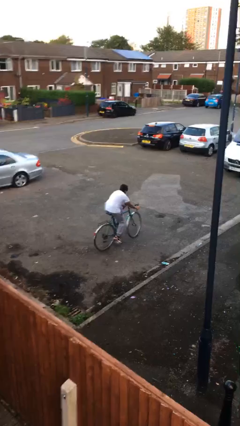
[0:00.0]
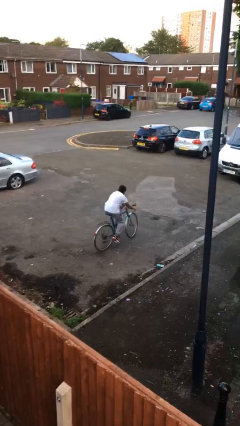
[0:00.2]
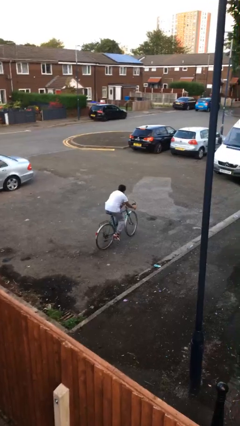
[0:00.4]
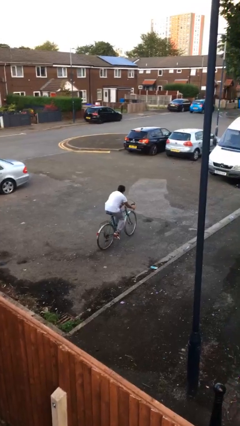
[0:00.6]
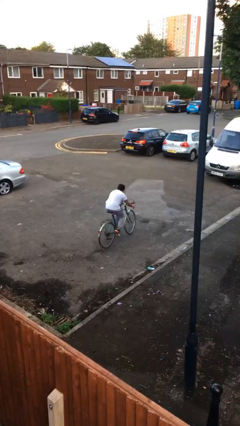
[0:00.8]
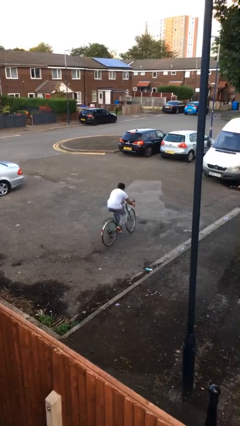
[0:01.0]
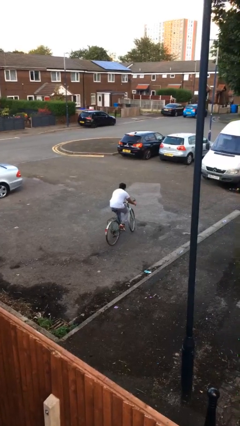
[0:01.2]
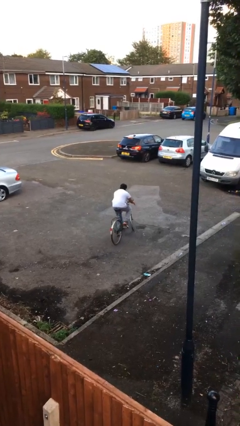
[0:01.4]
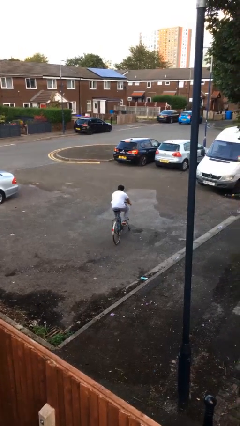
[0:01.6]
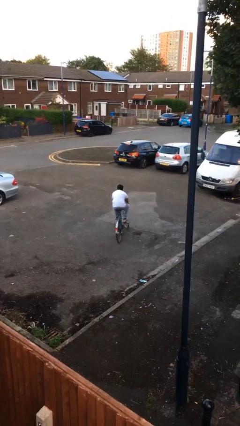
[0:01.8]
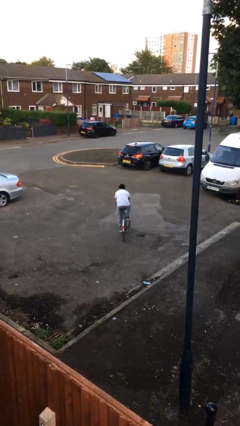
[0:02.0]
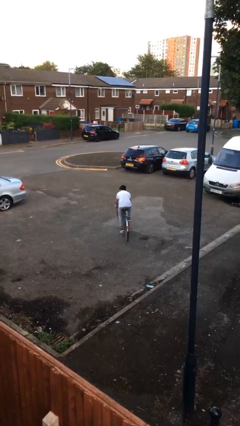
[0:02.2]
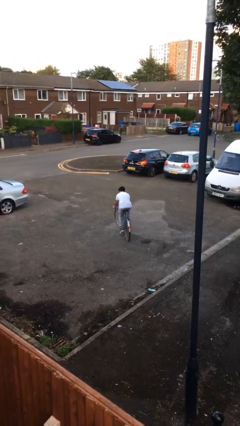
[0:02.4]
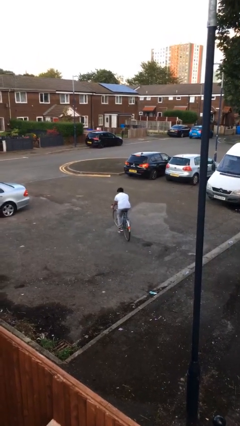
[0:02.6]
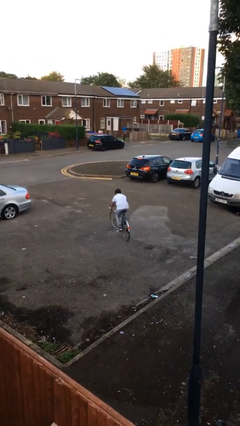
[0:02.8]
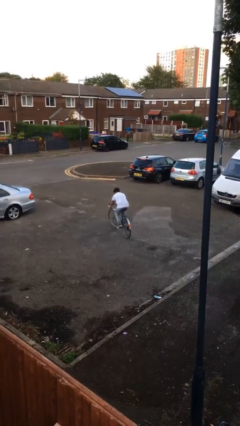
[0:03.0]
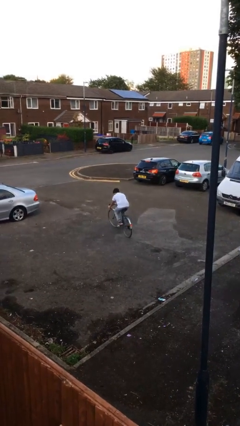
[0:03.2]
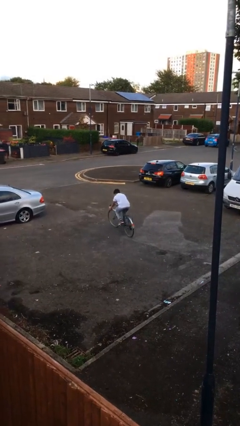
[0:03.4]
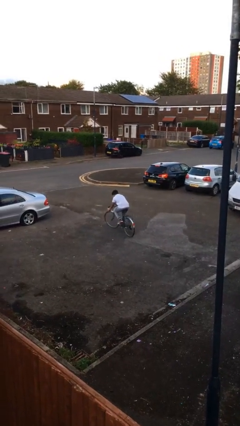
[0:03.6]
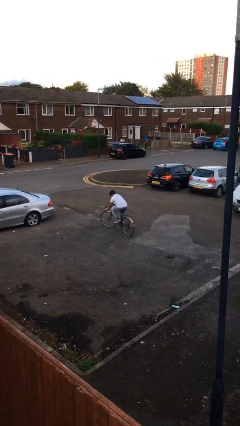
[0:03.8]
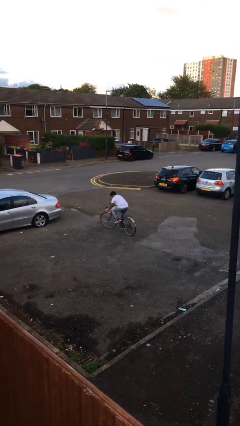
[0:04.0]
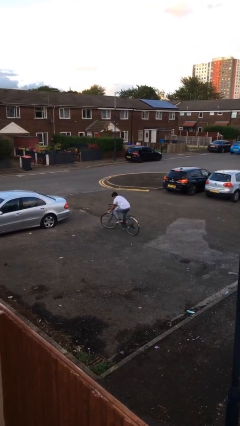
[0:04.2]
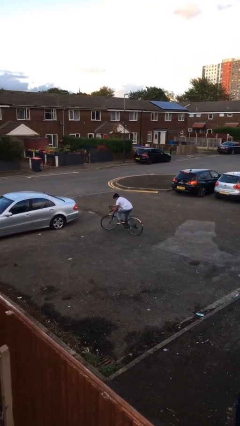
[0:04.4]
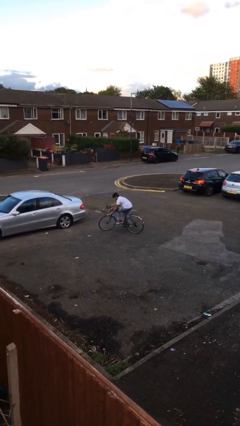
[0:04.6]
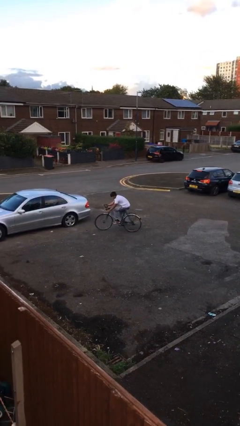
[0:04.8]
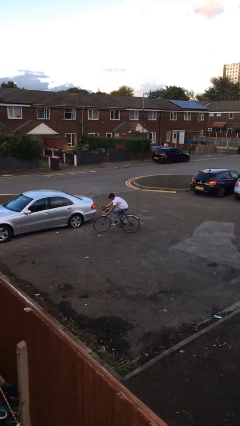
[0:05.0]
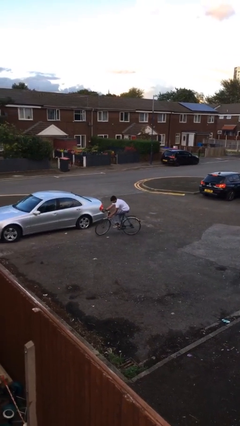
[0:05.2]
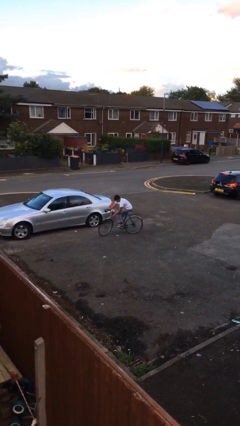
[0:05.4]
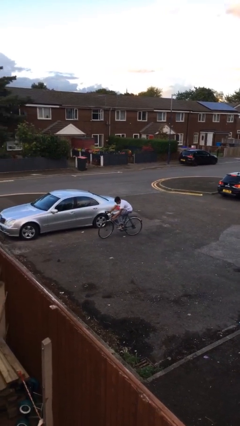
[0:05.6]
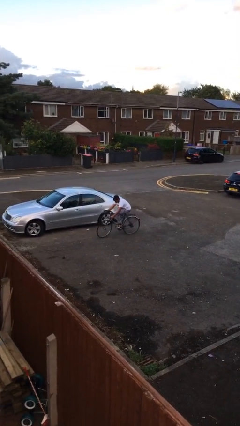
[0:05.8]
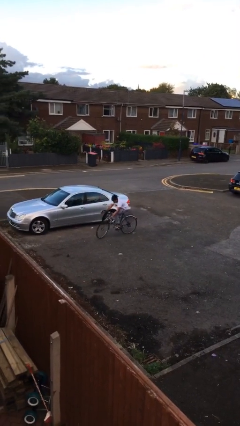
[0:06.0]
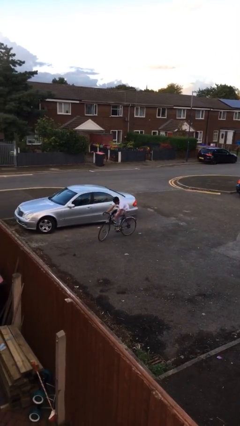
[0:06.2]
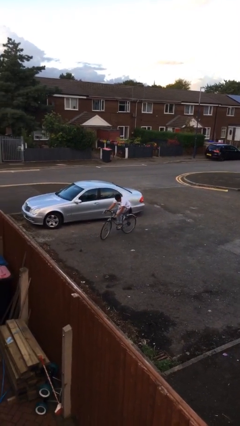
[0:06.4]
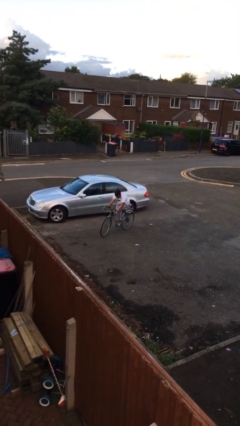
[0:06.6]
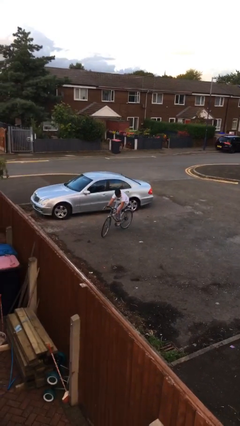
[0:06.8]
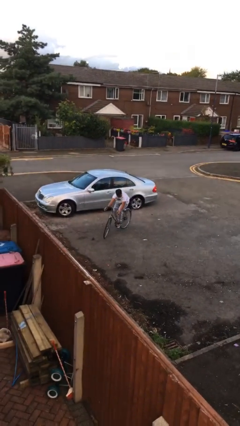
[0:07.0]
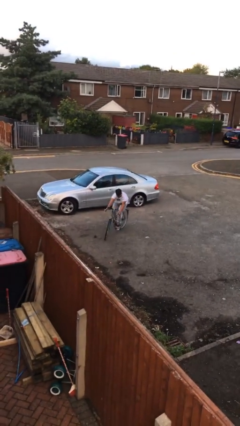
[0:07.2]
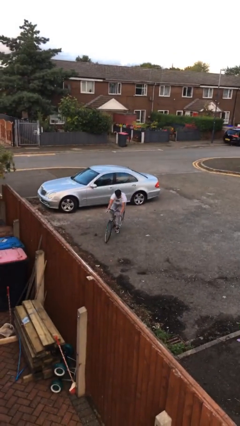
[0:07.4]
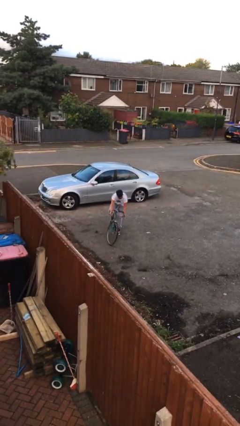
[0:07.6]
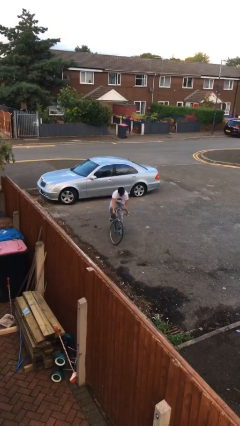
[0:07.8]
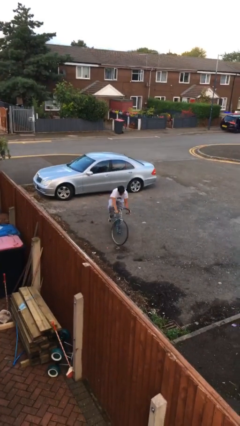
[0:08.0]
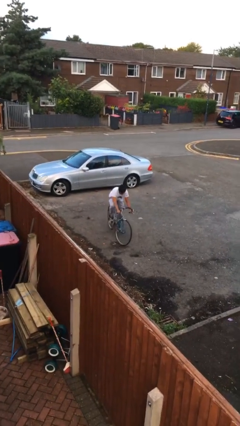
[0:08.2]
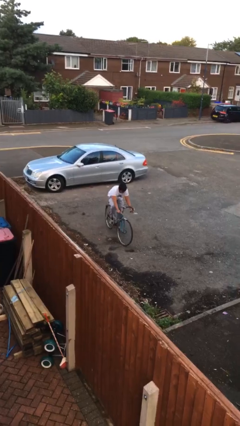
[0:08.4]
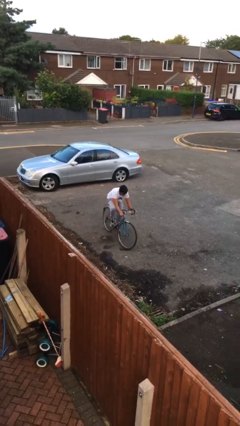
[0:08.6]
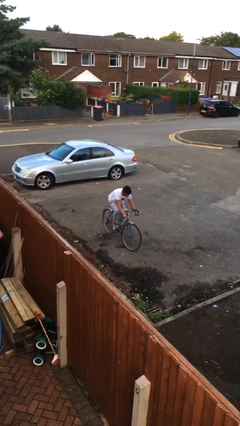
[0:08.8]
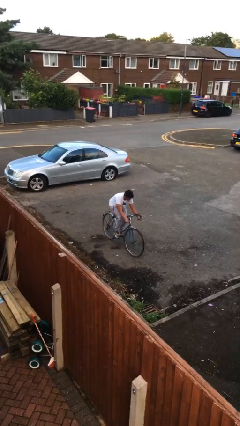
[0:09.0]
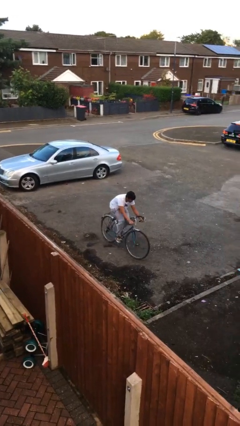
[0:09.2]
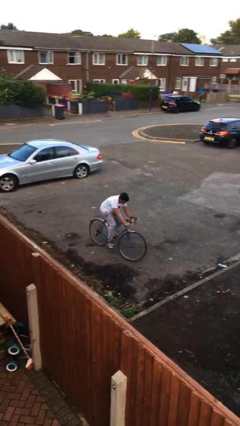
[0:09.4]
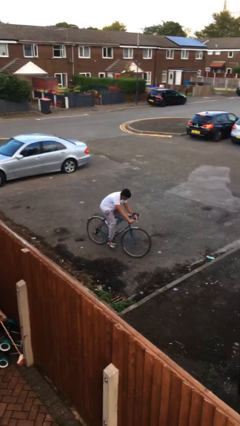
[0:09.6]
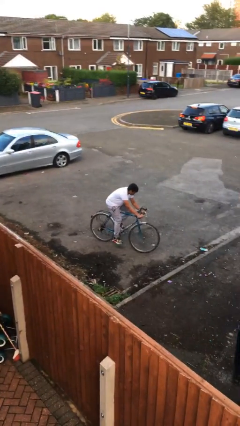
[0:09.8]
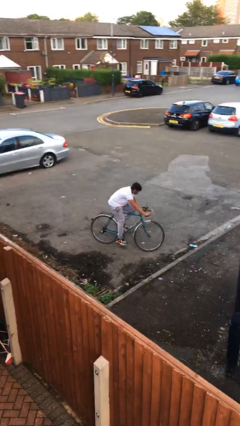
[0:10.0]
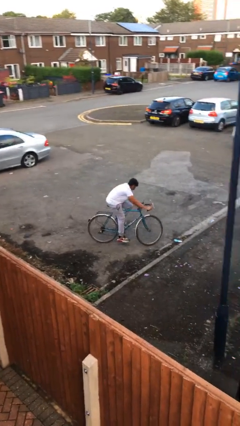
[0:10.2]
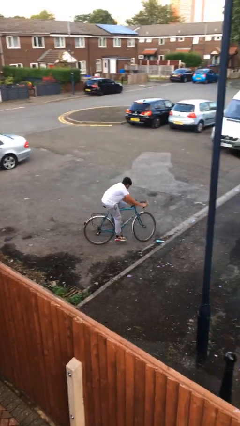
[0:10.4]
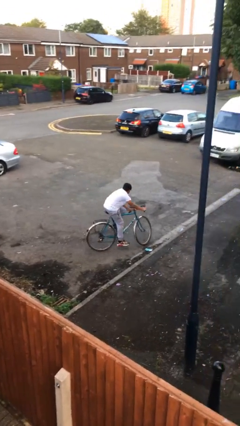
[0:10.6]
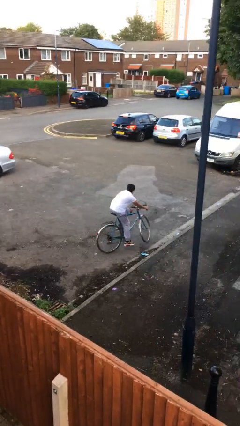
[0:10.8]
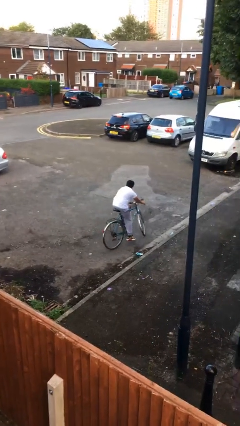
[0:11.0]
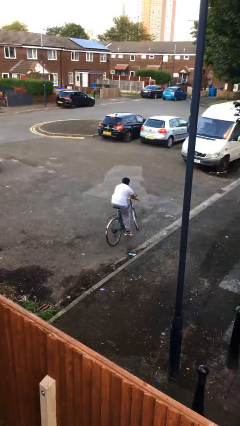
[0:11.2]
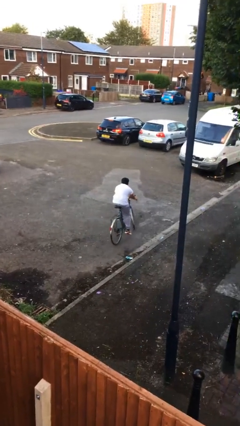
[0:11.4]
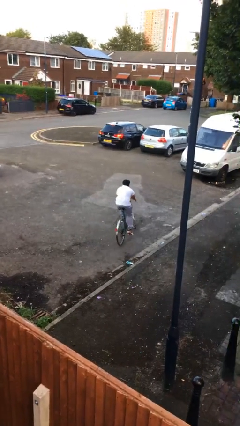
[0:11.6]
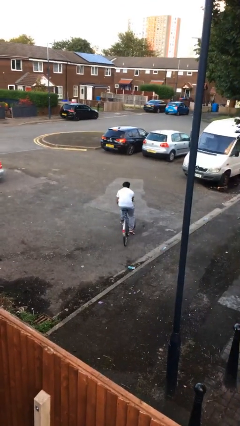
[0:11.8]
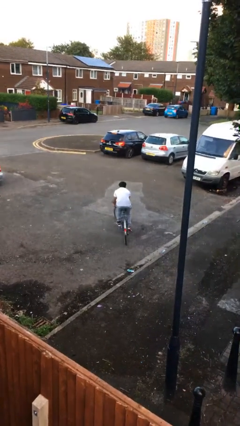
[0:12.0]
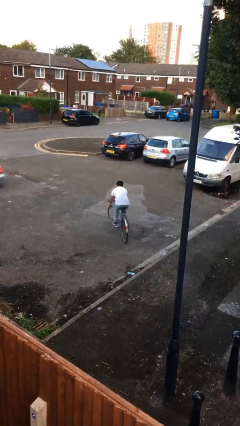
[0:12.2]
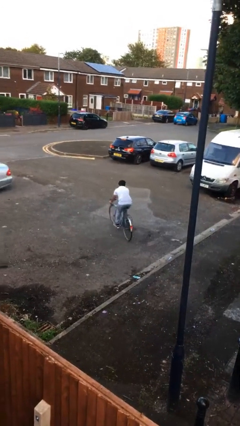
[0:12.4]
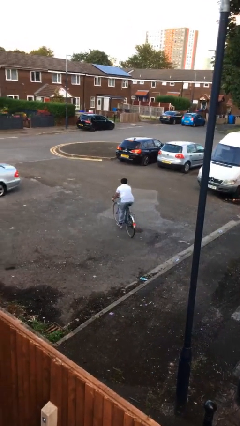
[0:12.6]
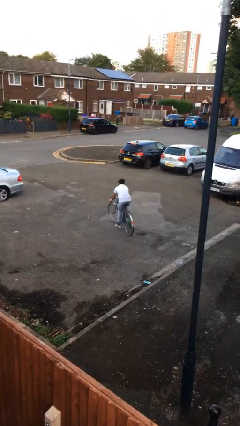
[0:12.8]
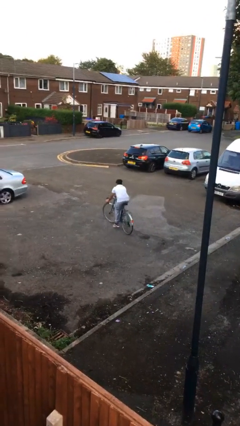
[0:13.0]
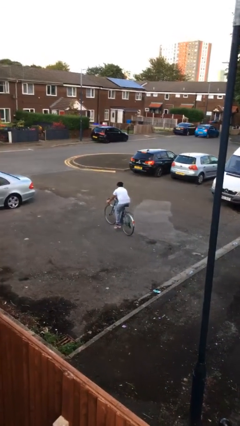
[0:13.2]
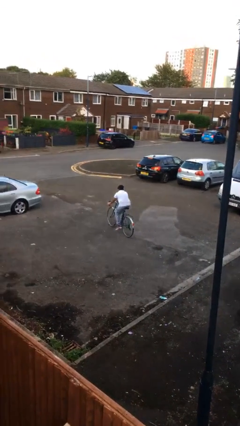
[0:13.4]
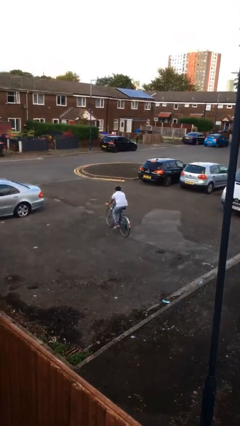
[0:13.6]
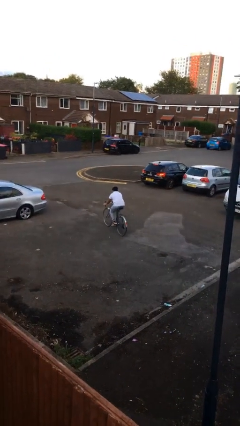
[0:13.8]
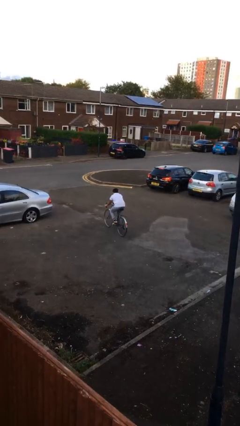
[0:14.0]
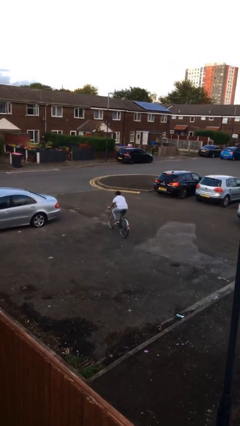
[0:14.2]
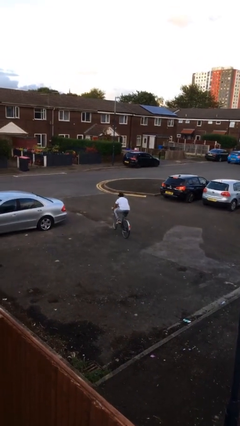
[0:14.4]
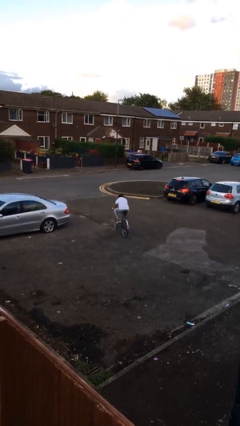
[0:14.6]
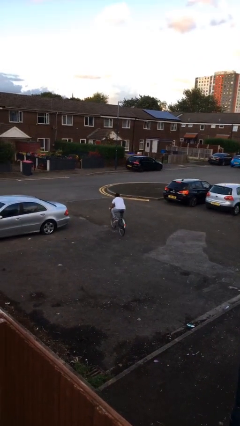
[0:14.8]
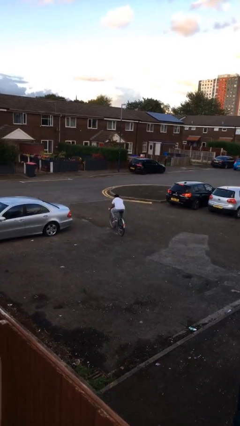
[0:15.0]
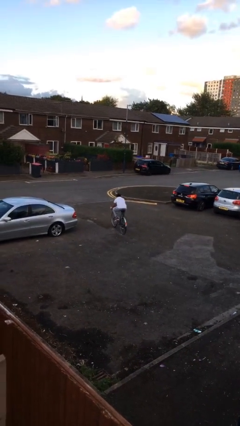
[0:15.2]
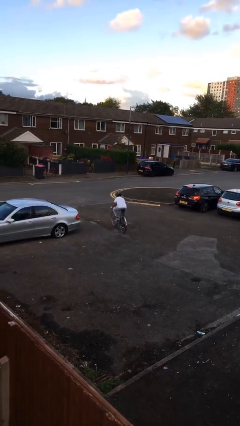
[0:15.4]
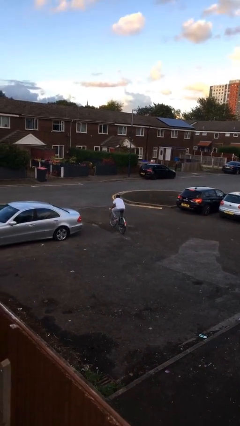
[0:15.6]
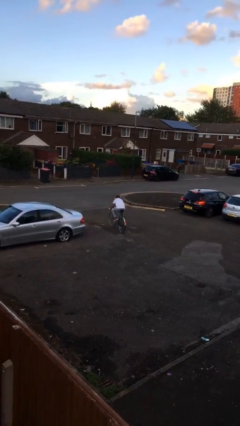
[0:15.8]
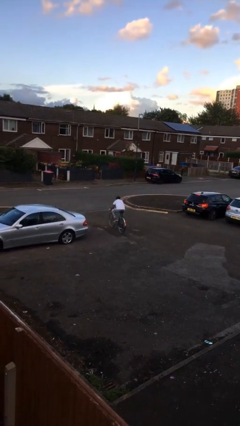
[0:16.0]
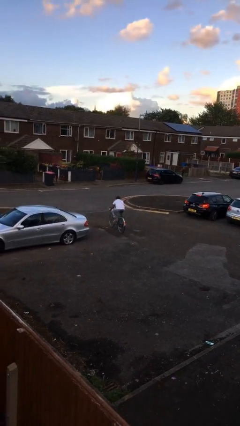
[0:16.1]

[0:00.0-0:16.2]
person rides bicycle

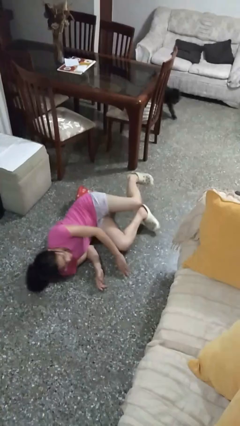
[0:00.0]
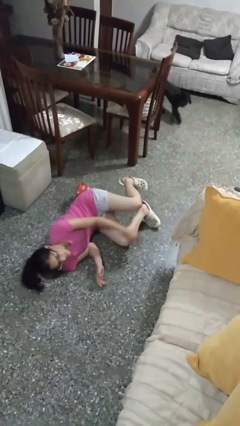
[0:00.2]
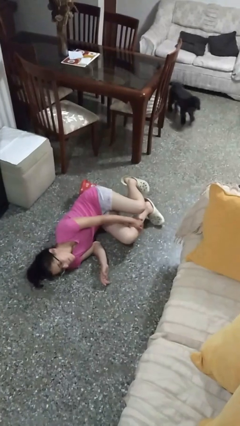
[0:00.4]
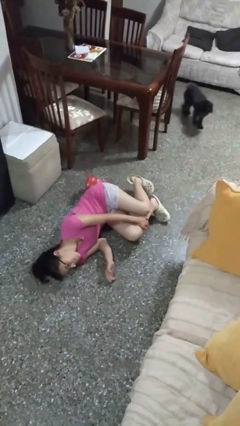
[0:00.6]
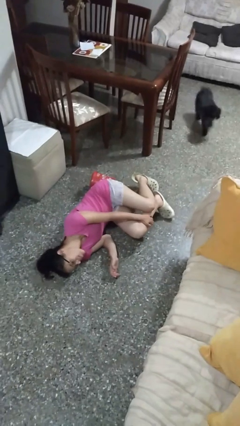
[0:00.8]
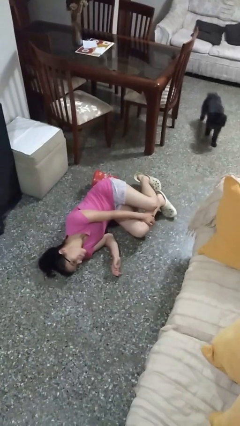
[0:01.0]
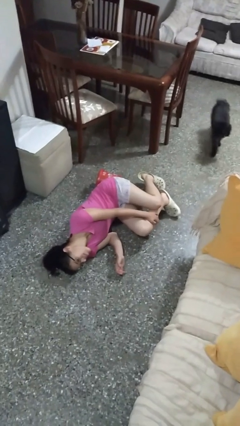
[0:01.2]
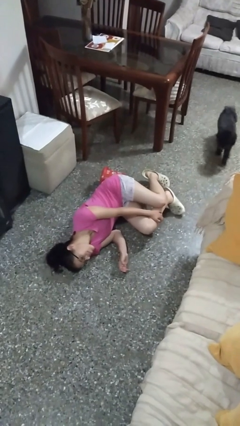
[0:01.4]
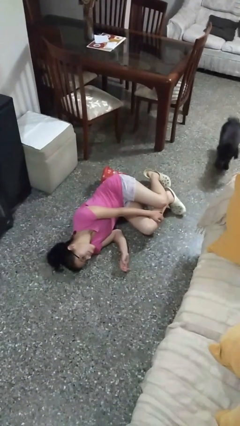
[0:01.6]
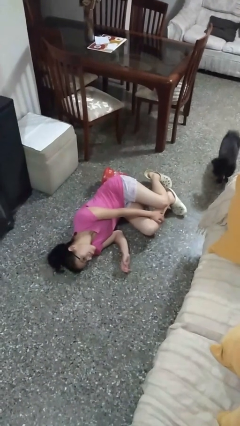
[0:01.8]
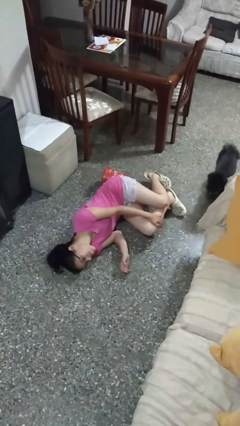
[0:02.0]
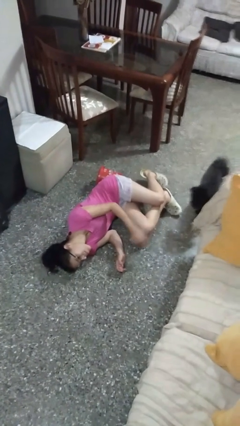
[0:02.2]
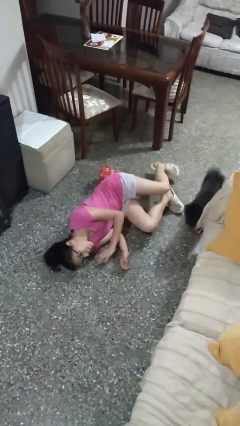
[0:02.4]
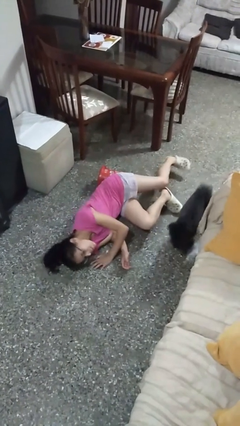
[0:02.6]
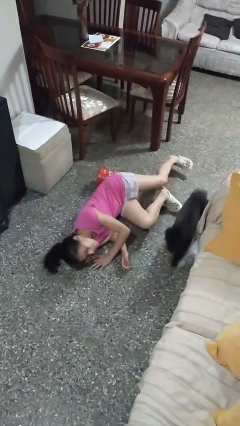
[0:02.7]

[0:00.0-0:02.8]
person lies down on floor
